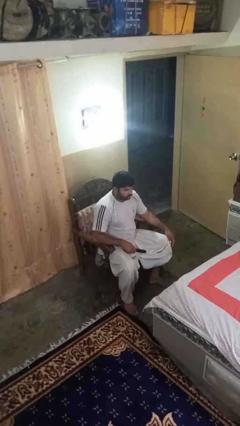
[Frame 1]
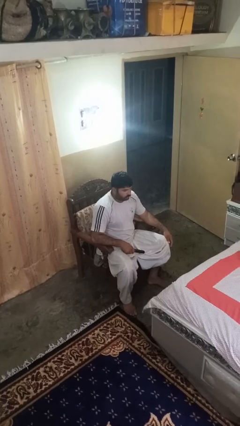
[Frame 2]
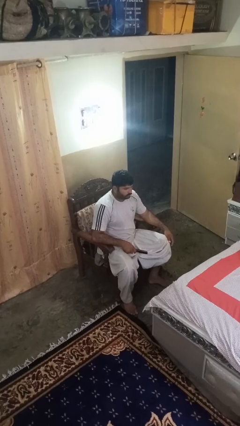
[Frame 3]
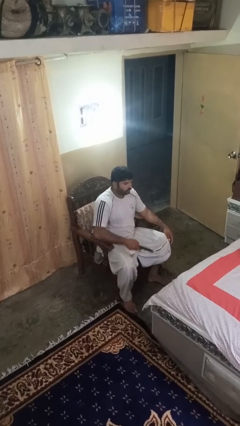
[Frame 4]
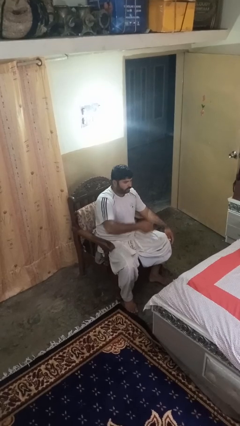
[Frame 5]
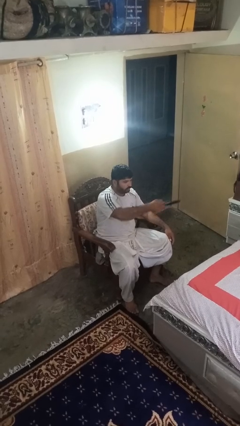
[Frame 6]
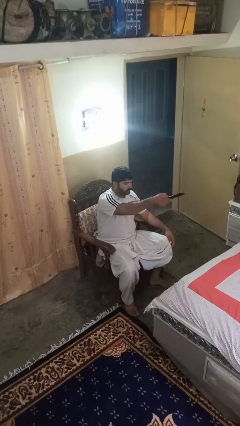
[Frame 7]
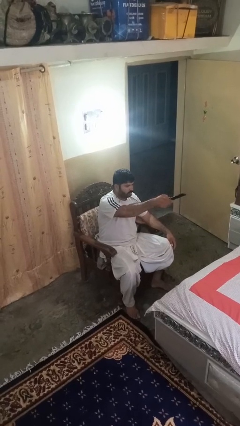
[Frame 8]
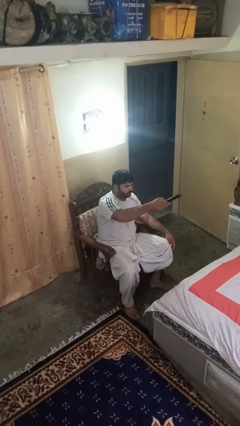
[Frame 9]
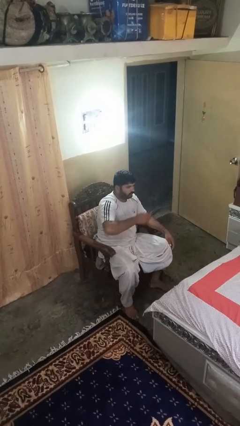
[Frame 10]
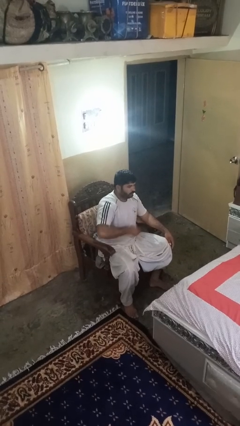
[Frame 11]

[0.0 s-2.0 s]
person uses television remote

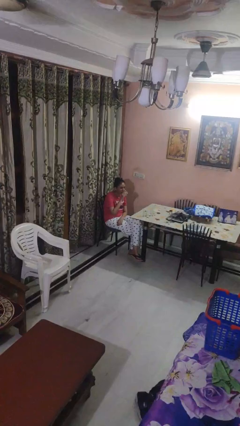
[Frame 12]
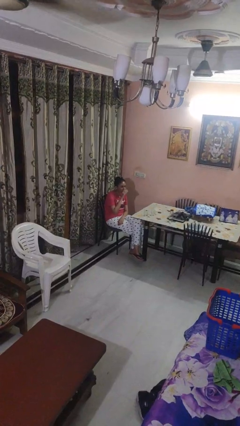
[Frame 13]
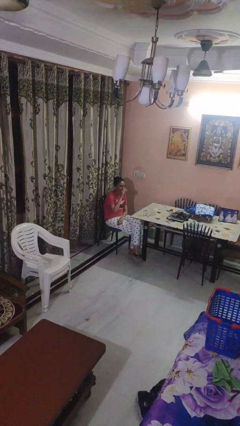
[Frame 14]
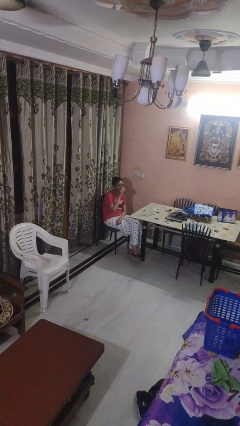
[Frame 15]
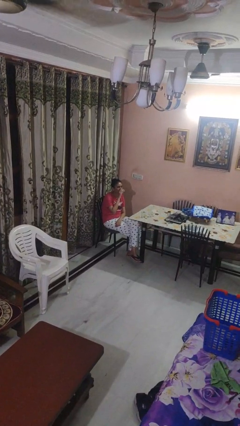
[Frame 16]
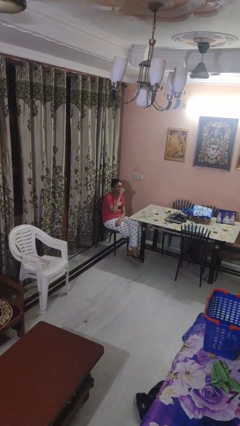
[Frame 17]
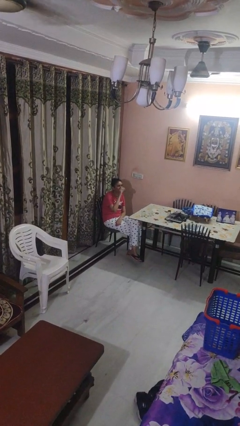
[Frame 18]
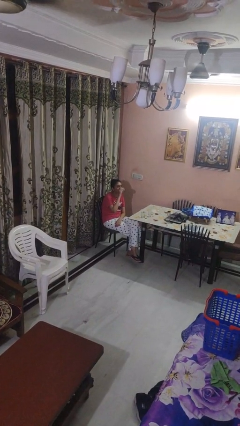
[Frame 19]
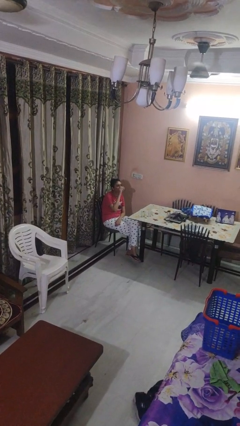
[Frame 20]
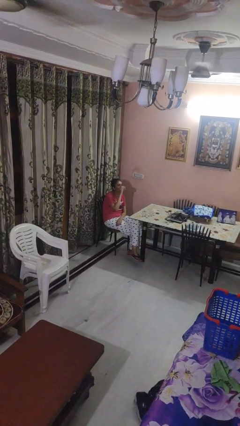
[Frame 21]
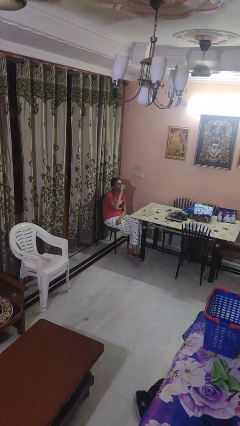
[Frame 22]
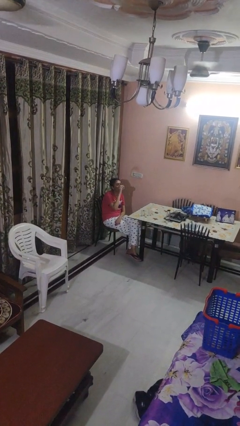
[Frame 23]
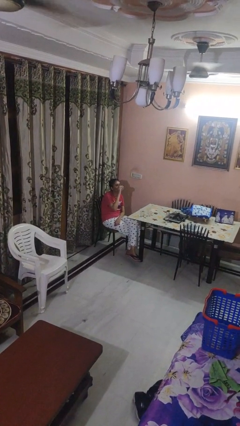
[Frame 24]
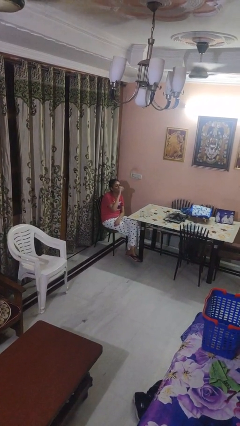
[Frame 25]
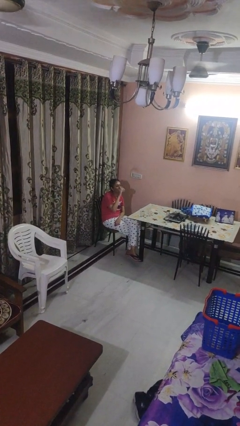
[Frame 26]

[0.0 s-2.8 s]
person drinks from shotglass

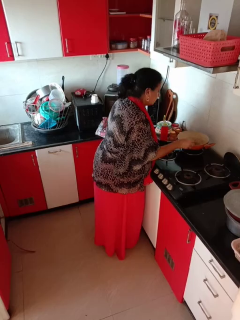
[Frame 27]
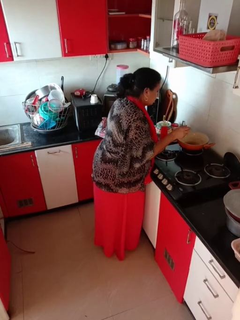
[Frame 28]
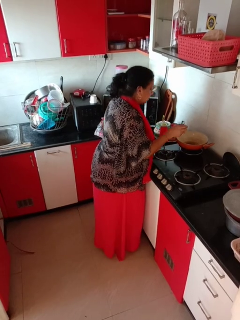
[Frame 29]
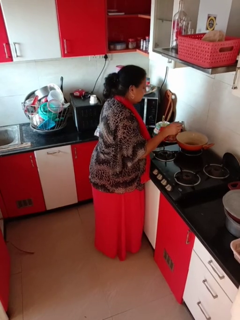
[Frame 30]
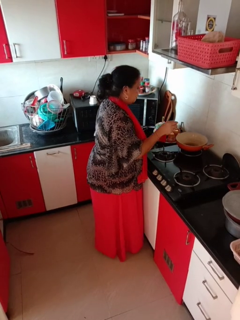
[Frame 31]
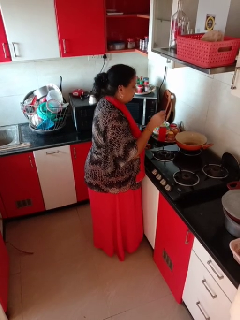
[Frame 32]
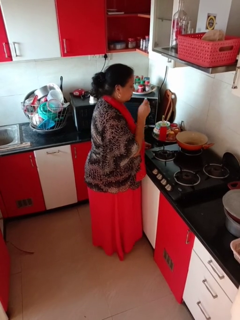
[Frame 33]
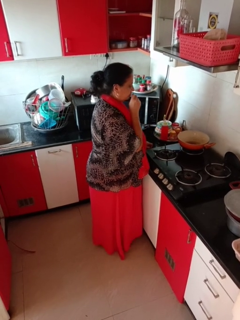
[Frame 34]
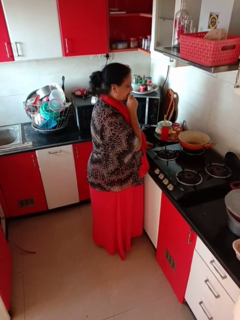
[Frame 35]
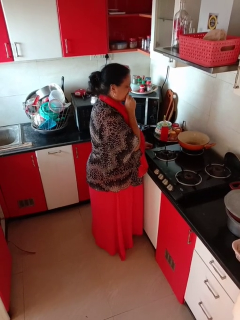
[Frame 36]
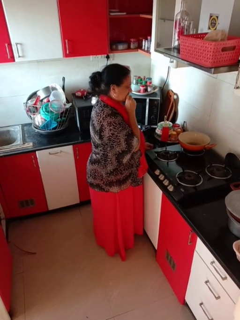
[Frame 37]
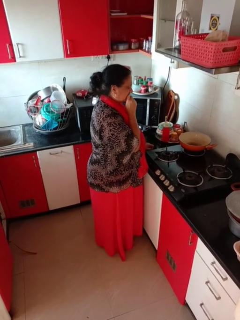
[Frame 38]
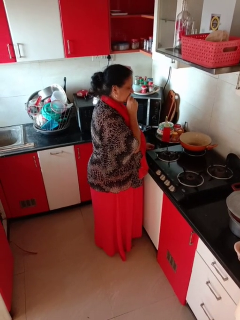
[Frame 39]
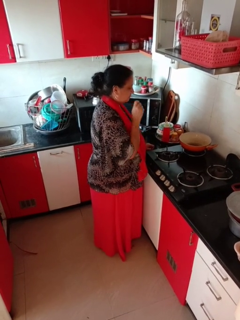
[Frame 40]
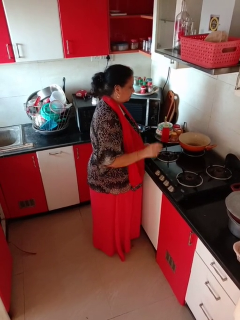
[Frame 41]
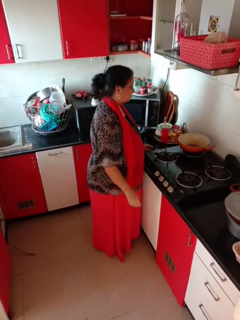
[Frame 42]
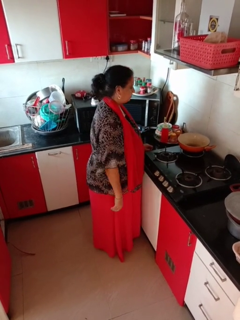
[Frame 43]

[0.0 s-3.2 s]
person burns hand

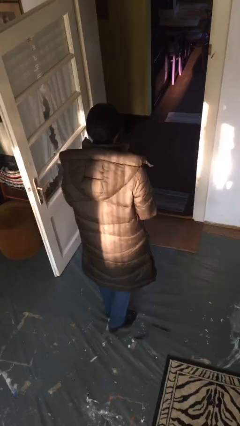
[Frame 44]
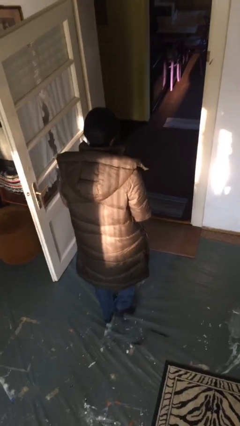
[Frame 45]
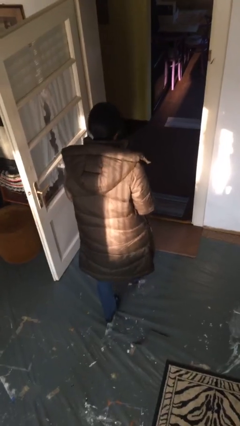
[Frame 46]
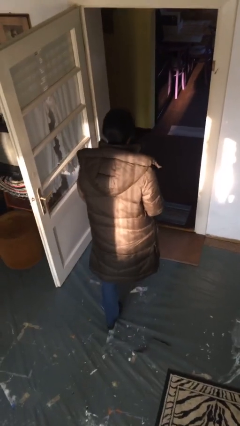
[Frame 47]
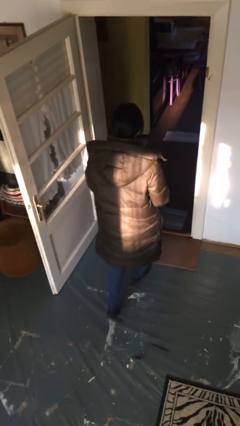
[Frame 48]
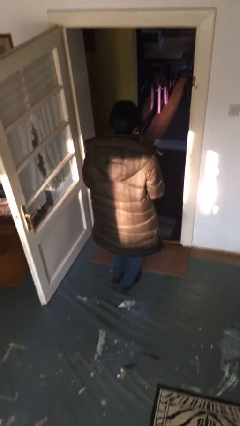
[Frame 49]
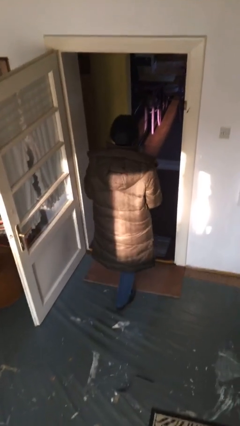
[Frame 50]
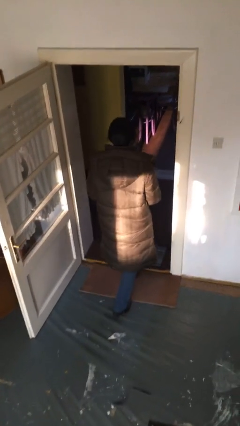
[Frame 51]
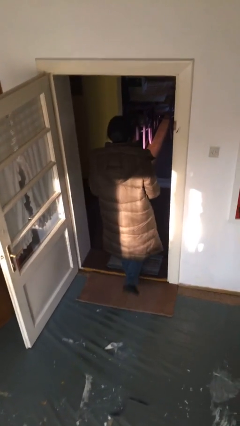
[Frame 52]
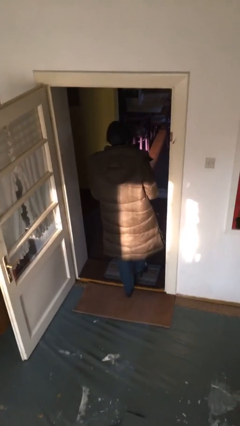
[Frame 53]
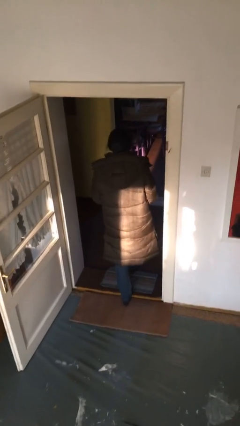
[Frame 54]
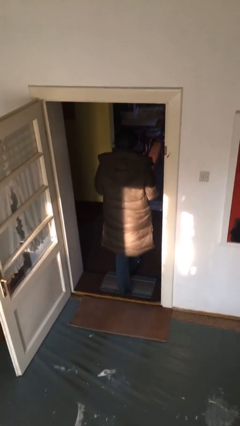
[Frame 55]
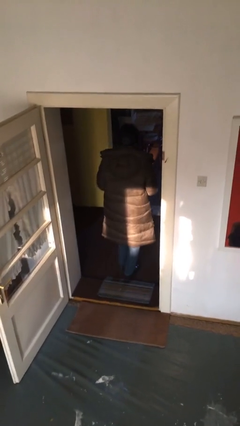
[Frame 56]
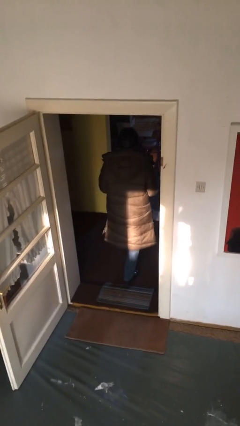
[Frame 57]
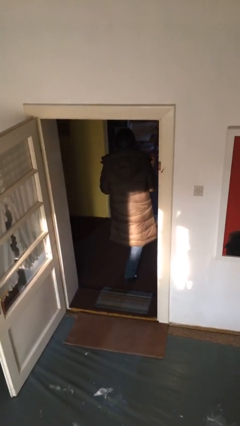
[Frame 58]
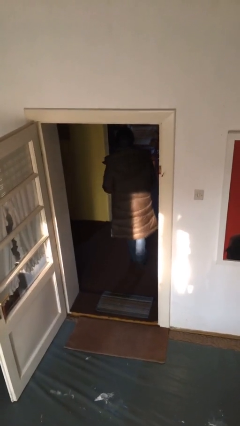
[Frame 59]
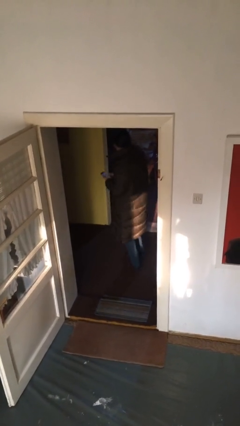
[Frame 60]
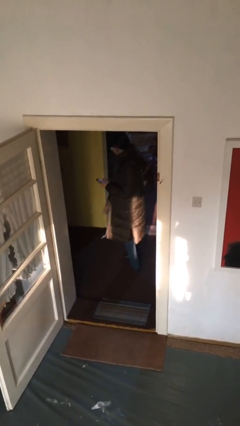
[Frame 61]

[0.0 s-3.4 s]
person exits scene through structure

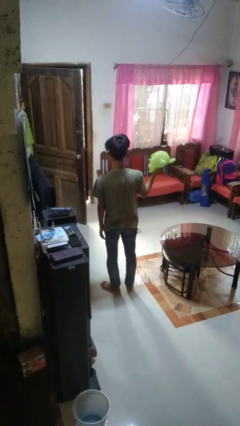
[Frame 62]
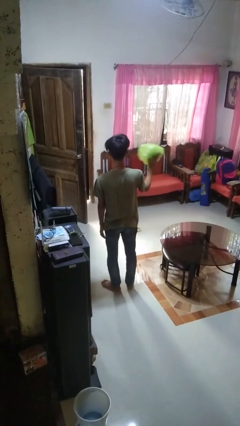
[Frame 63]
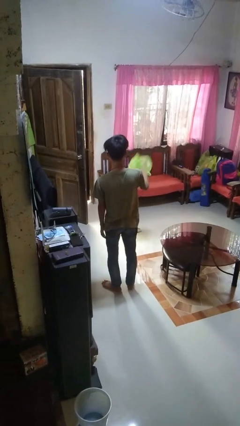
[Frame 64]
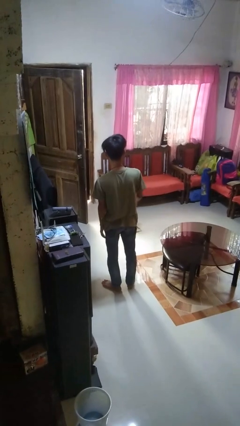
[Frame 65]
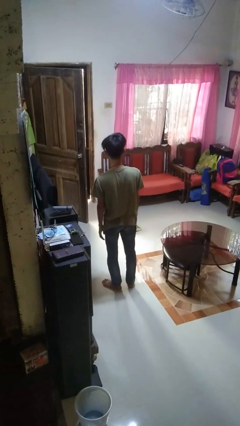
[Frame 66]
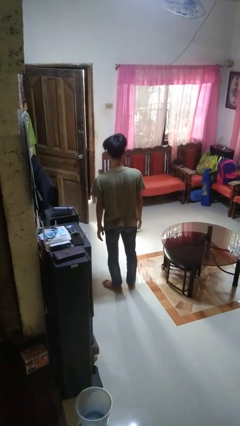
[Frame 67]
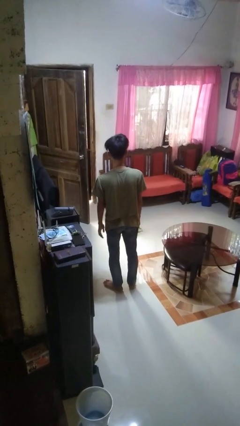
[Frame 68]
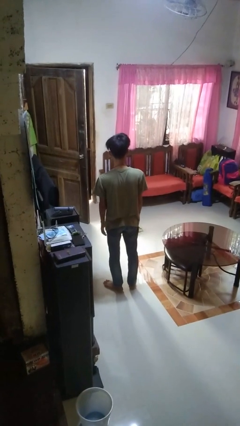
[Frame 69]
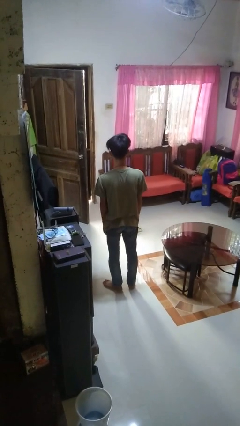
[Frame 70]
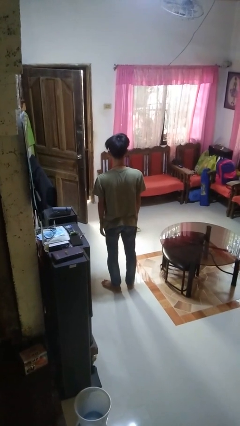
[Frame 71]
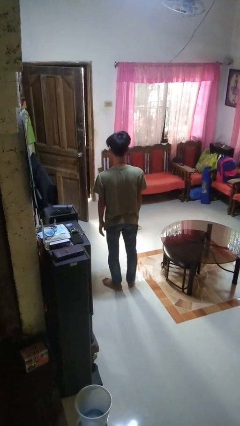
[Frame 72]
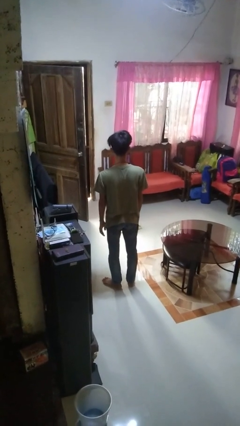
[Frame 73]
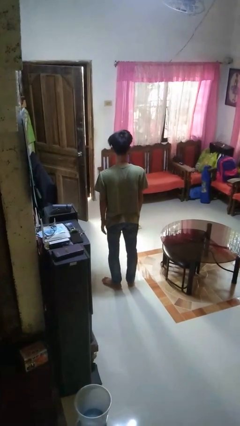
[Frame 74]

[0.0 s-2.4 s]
person throws object to ground

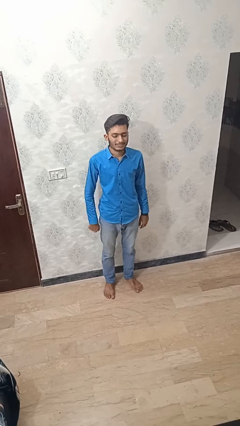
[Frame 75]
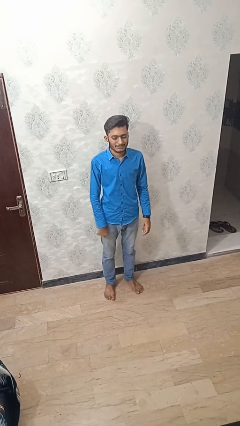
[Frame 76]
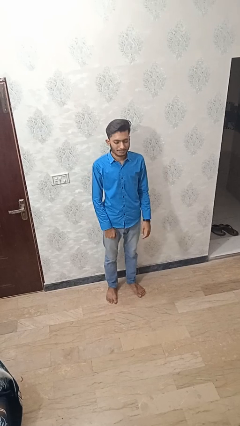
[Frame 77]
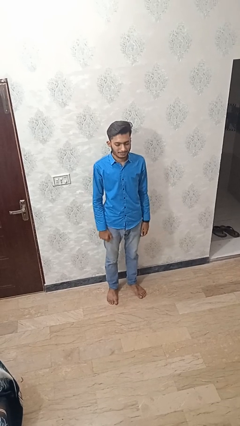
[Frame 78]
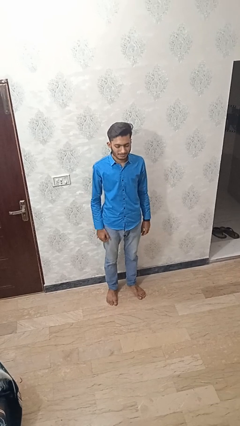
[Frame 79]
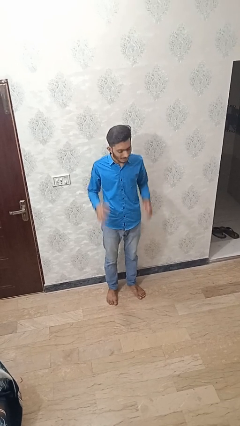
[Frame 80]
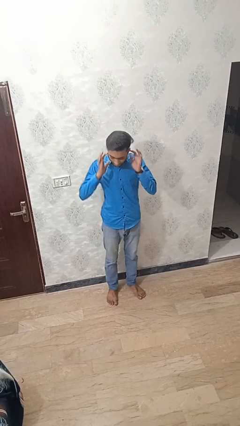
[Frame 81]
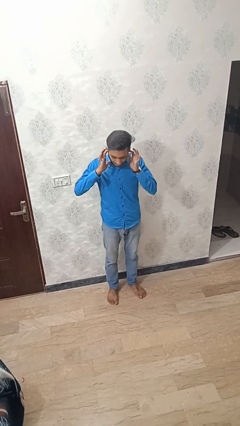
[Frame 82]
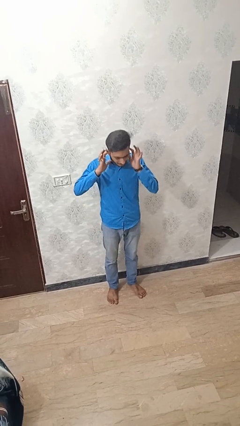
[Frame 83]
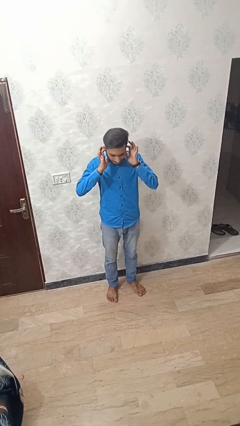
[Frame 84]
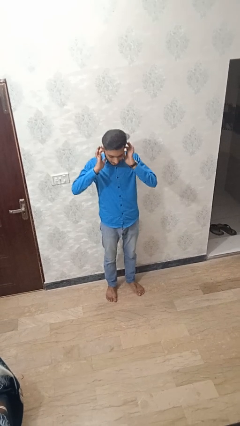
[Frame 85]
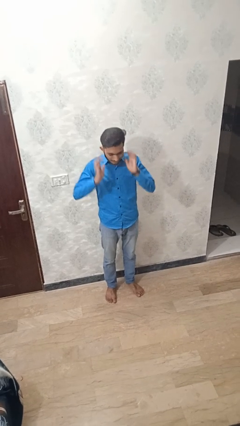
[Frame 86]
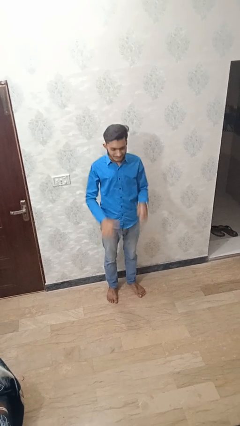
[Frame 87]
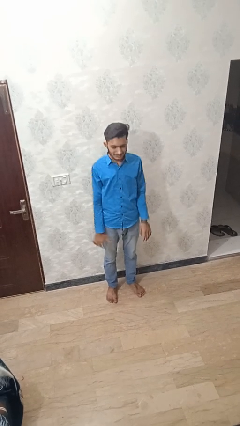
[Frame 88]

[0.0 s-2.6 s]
person puts fingers in ear

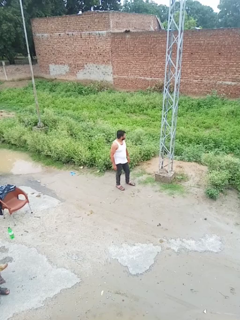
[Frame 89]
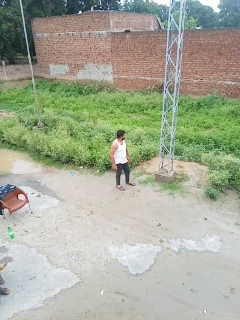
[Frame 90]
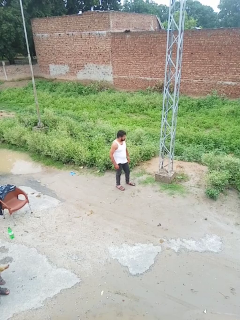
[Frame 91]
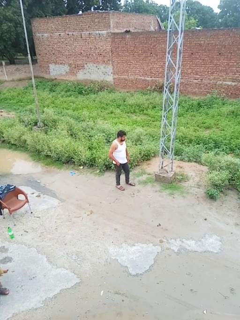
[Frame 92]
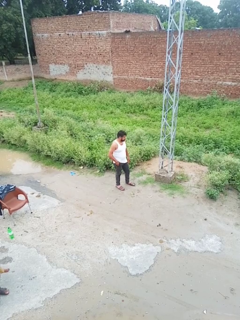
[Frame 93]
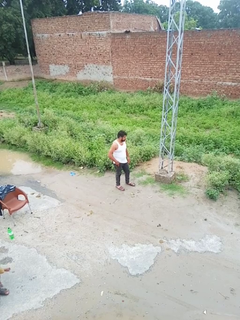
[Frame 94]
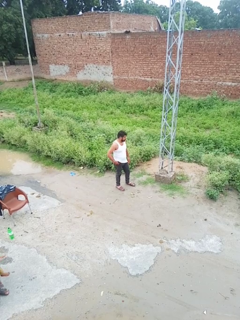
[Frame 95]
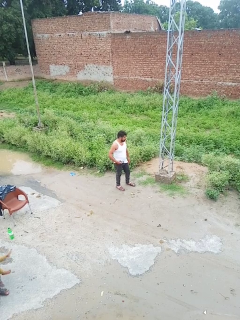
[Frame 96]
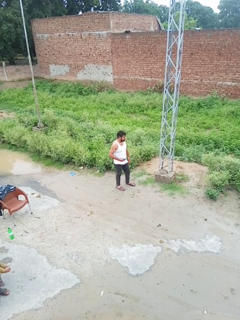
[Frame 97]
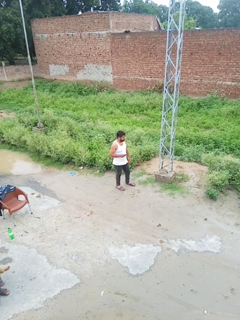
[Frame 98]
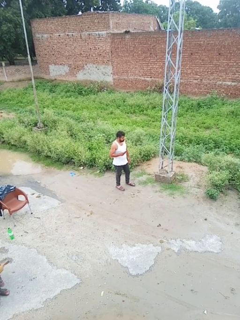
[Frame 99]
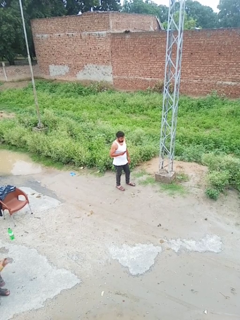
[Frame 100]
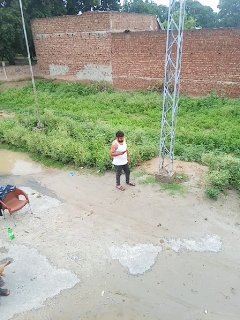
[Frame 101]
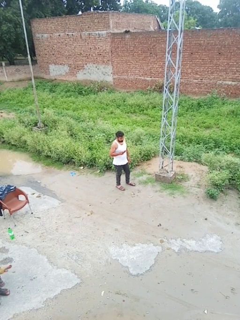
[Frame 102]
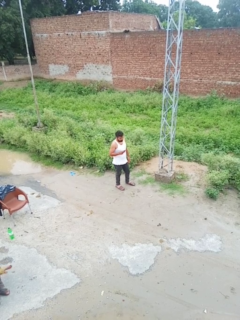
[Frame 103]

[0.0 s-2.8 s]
person takes phone from pocket
